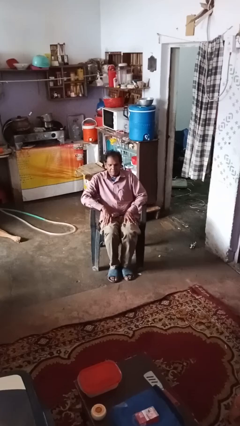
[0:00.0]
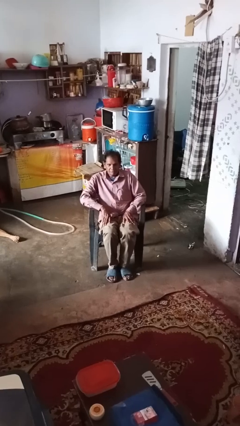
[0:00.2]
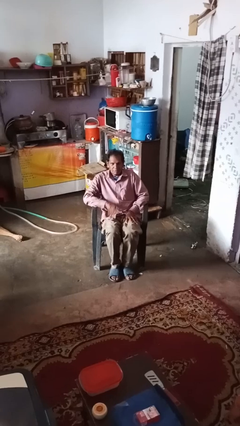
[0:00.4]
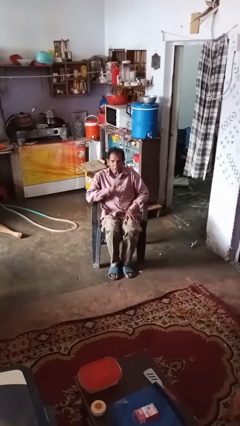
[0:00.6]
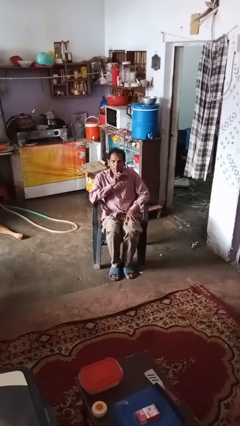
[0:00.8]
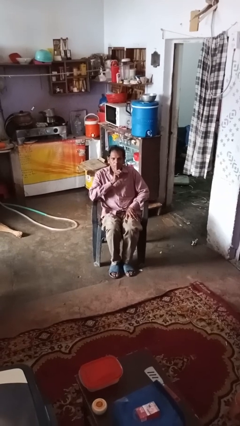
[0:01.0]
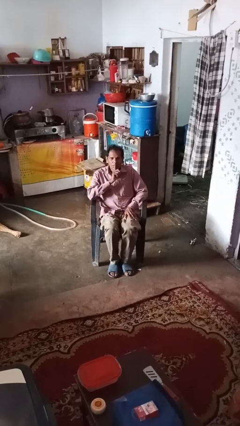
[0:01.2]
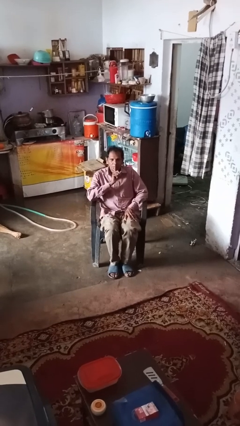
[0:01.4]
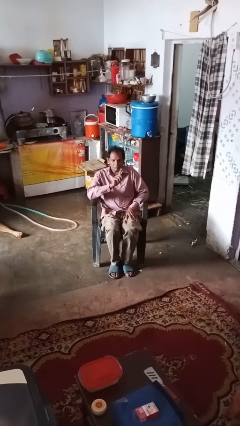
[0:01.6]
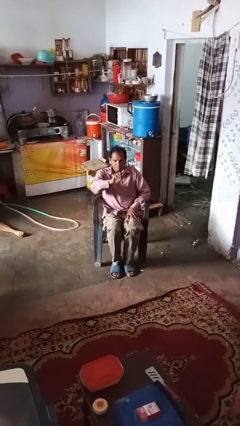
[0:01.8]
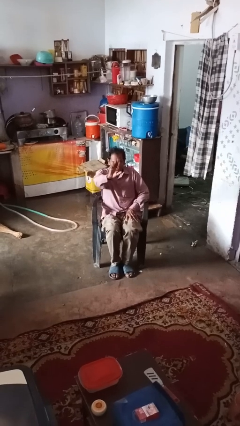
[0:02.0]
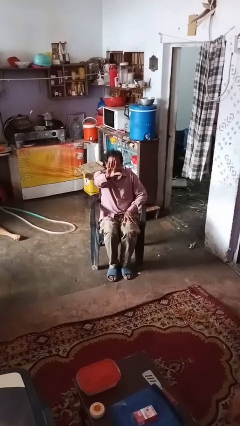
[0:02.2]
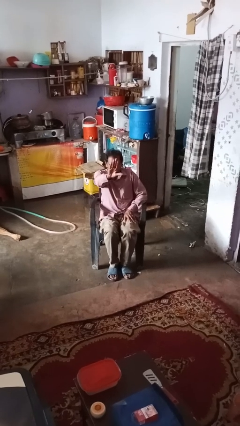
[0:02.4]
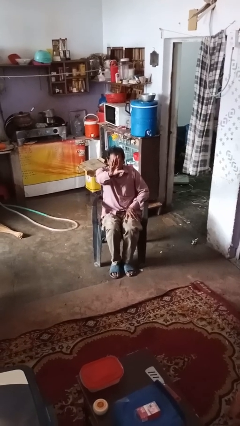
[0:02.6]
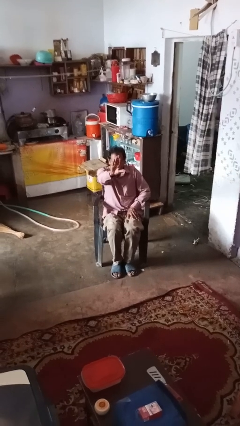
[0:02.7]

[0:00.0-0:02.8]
person gestures be quiet

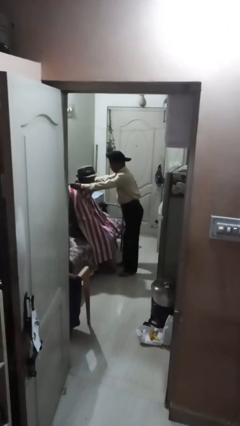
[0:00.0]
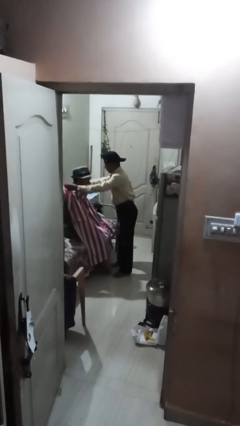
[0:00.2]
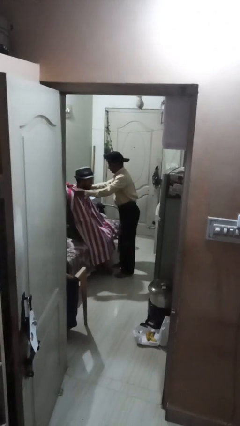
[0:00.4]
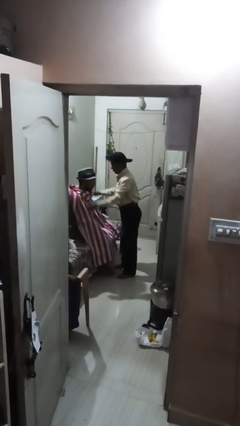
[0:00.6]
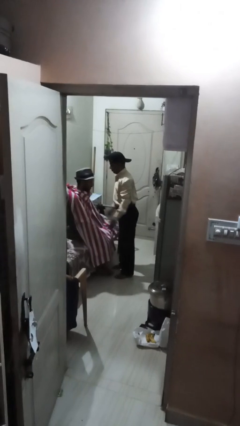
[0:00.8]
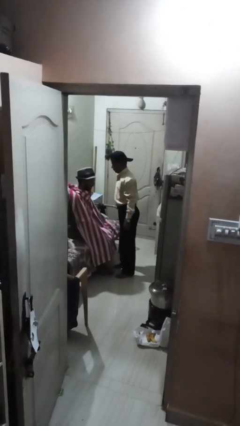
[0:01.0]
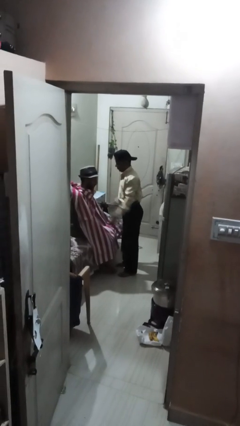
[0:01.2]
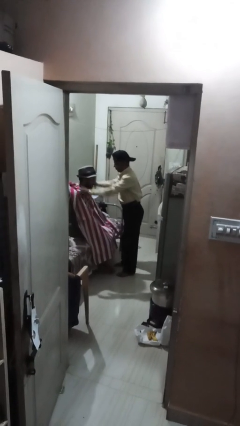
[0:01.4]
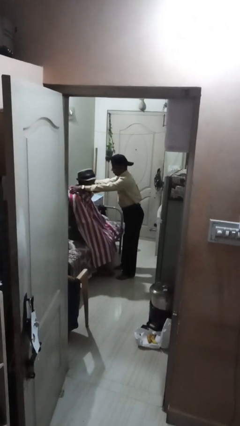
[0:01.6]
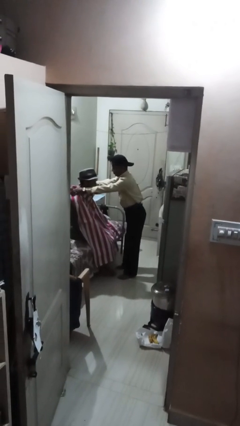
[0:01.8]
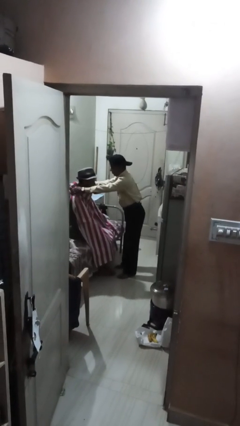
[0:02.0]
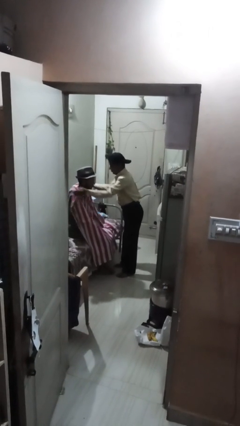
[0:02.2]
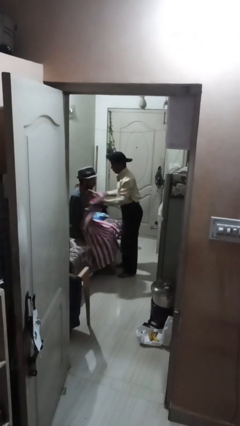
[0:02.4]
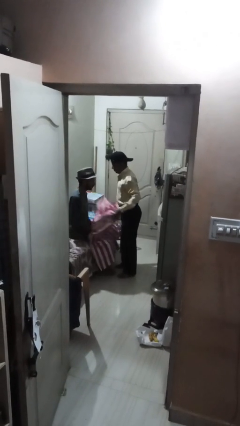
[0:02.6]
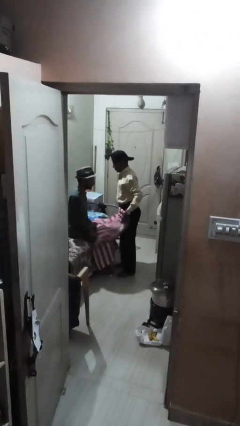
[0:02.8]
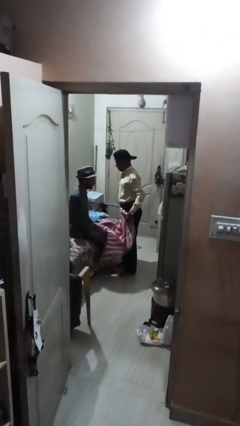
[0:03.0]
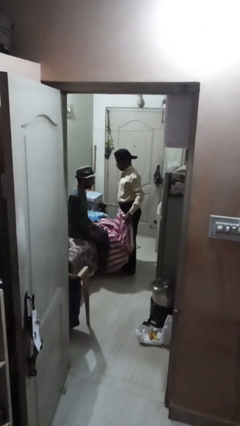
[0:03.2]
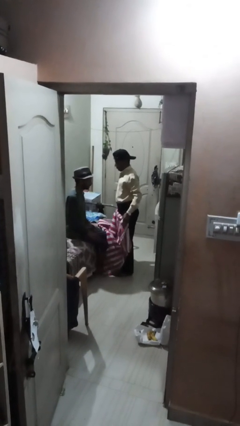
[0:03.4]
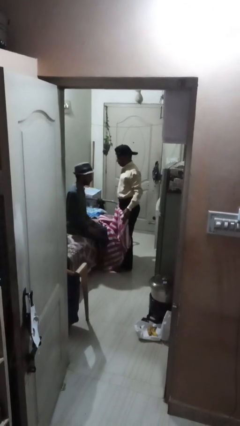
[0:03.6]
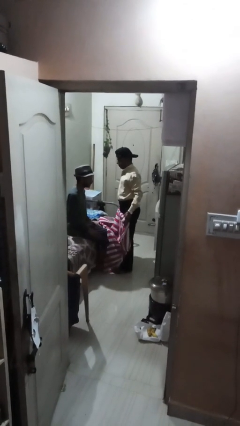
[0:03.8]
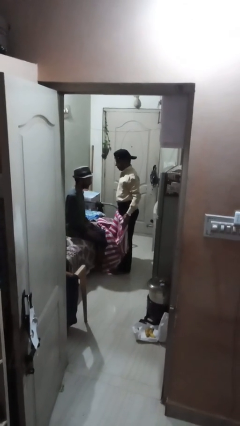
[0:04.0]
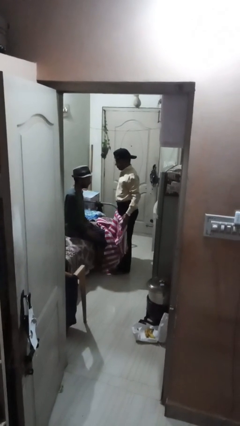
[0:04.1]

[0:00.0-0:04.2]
person uncovers friend with blanket

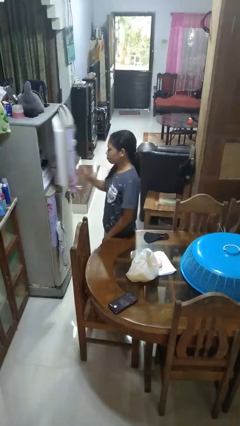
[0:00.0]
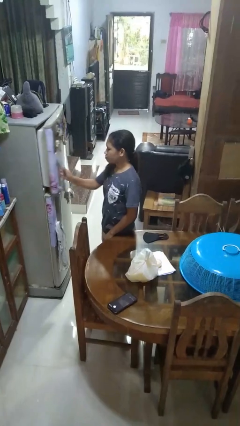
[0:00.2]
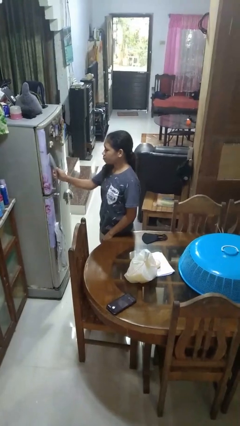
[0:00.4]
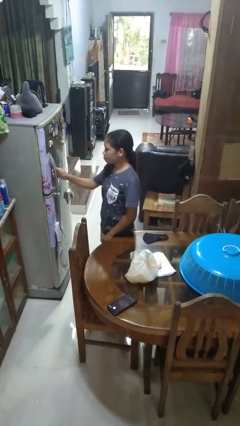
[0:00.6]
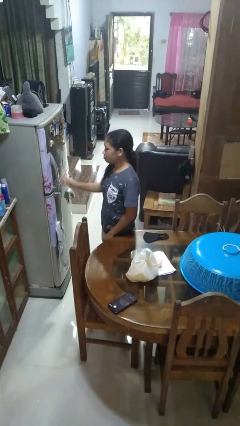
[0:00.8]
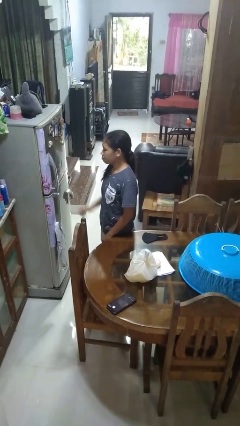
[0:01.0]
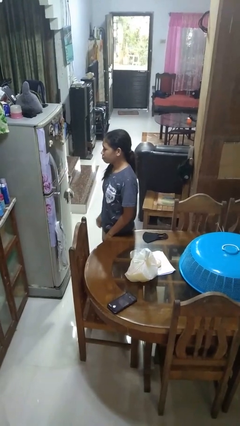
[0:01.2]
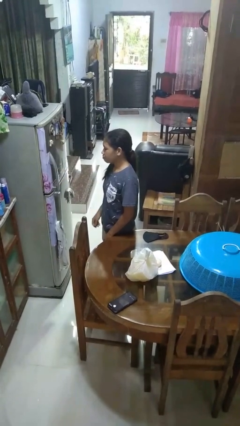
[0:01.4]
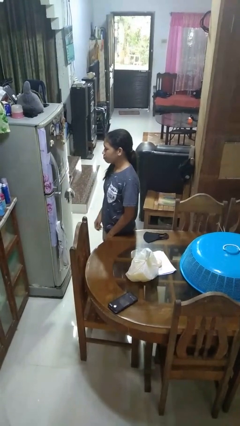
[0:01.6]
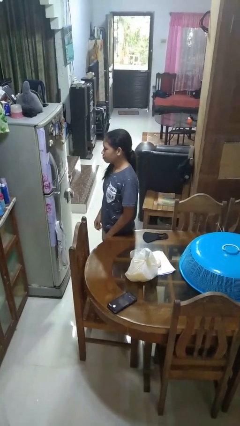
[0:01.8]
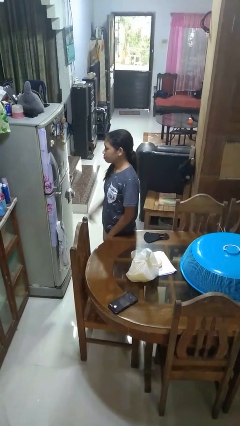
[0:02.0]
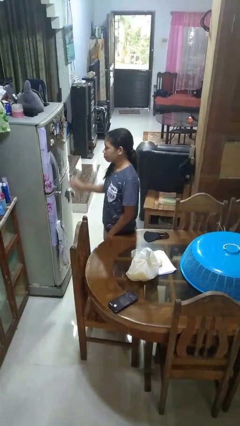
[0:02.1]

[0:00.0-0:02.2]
person closes refrigerator

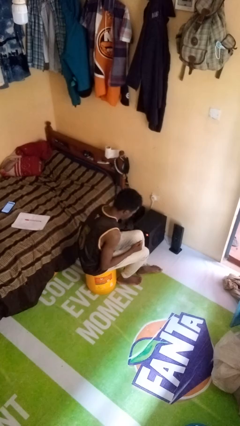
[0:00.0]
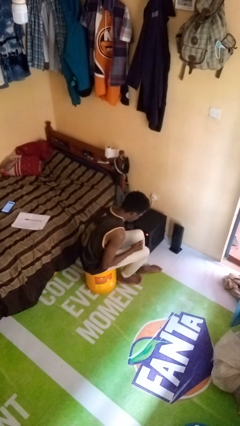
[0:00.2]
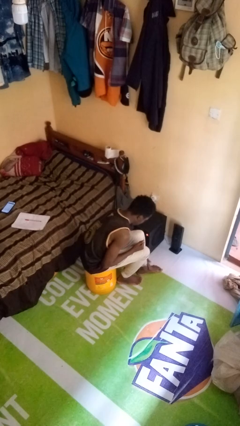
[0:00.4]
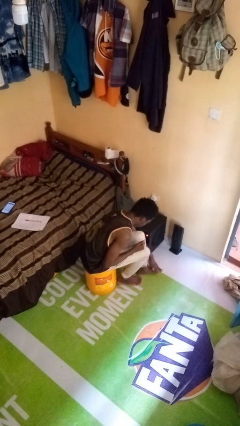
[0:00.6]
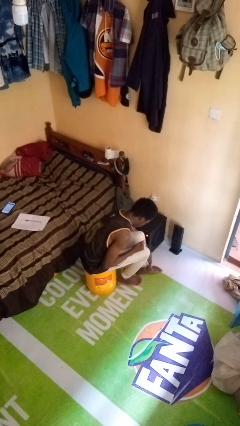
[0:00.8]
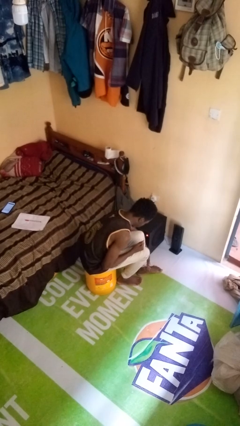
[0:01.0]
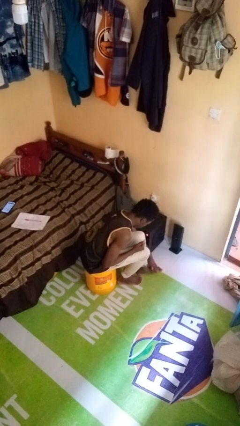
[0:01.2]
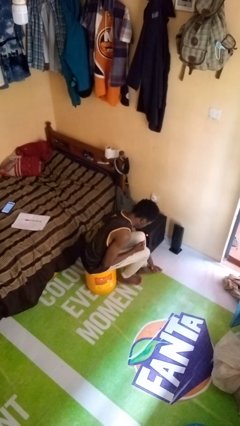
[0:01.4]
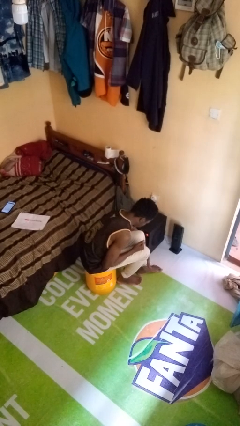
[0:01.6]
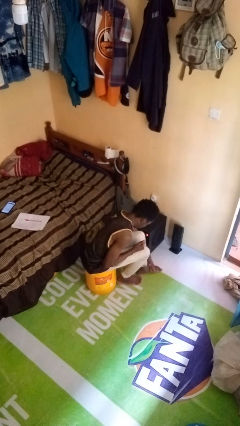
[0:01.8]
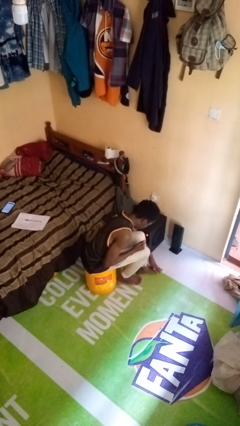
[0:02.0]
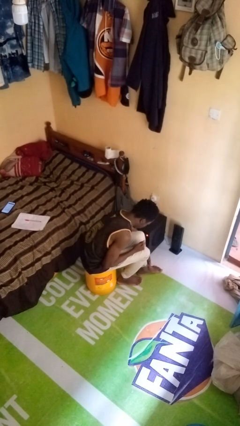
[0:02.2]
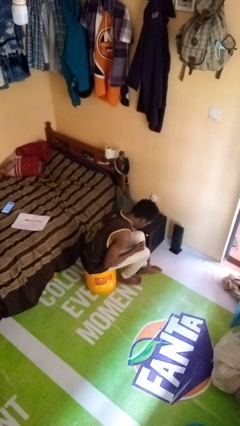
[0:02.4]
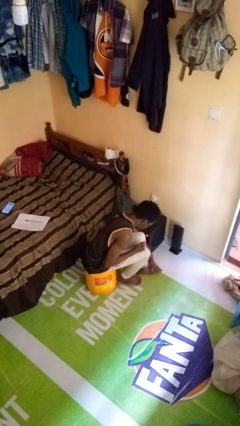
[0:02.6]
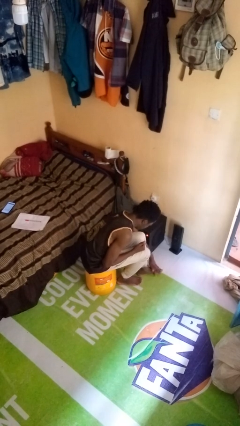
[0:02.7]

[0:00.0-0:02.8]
person rubs foot

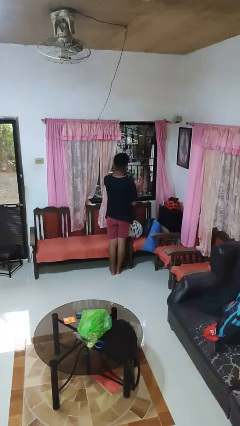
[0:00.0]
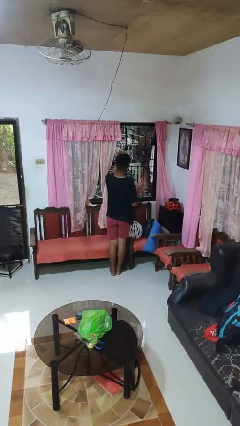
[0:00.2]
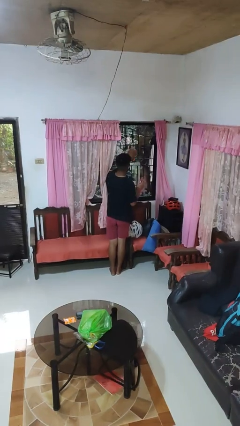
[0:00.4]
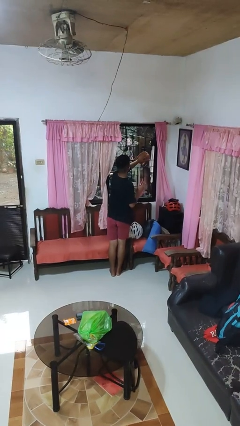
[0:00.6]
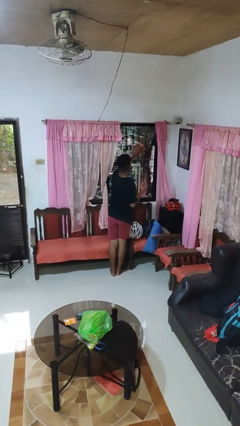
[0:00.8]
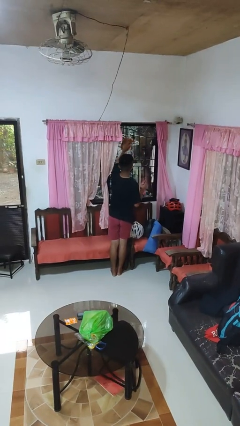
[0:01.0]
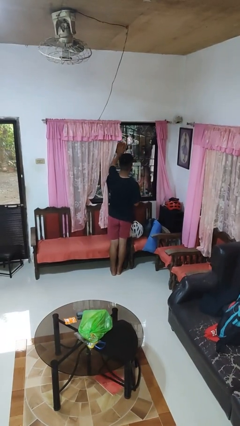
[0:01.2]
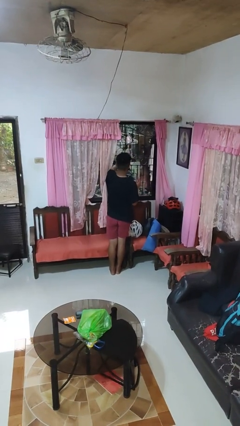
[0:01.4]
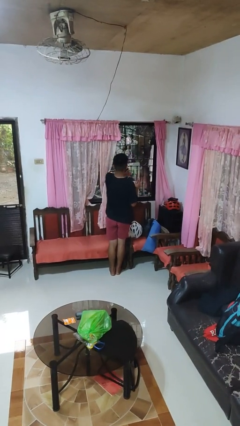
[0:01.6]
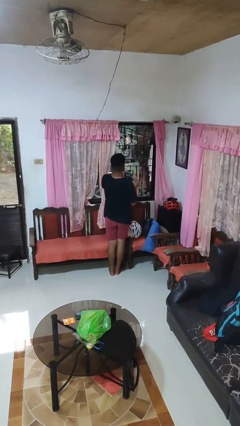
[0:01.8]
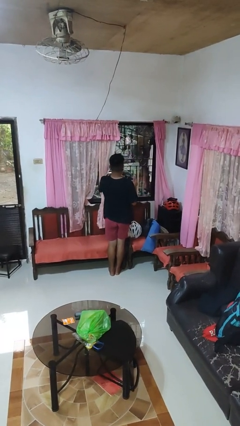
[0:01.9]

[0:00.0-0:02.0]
person washes window

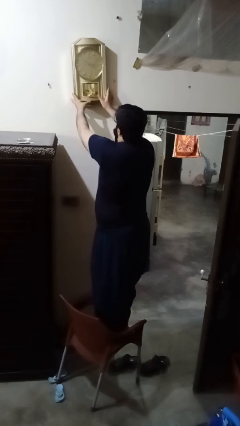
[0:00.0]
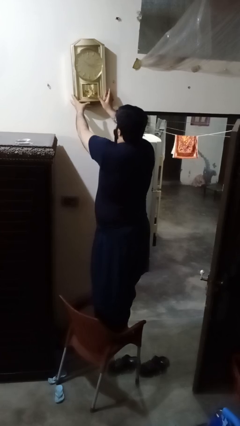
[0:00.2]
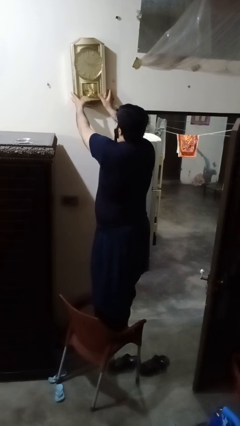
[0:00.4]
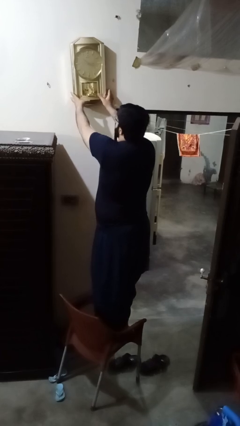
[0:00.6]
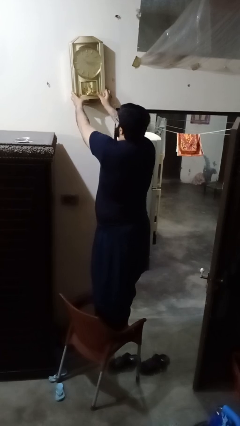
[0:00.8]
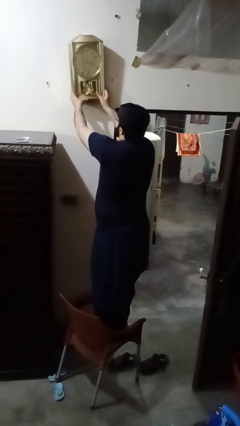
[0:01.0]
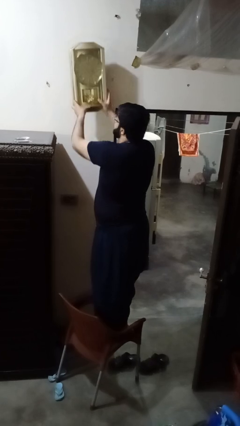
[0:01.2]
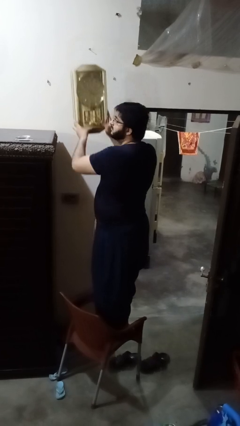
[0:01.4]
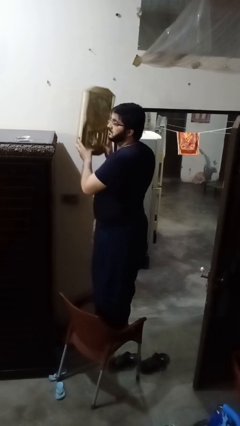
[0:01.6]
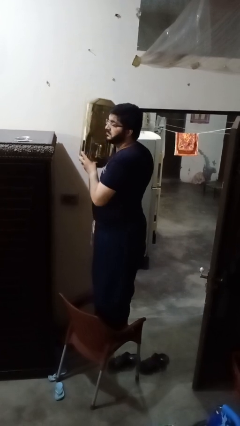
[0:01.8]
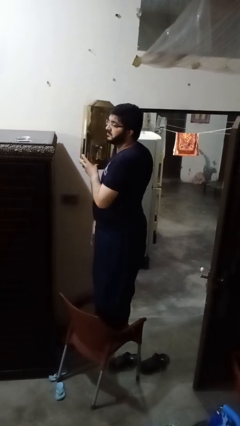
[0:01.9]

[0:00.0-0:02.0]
person takes down smoke detector

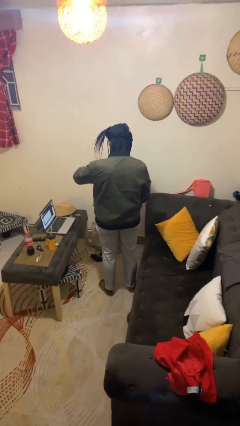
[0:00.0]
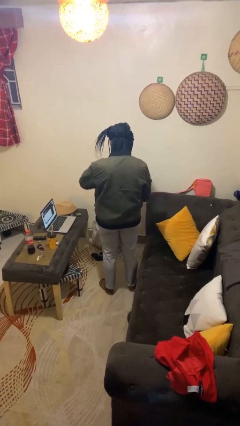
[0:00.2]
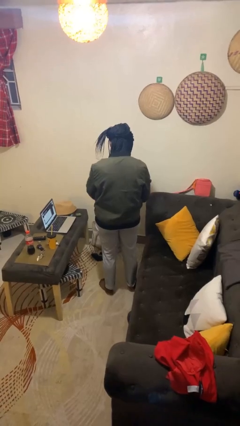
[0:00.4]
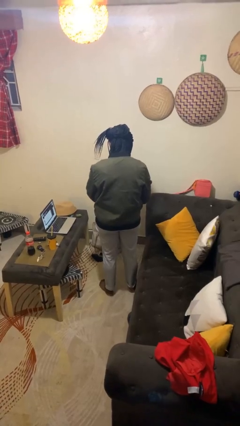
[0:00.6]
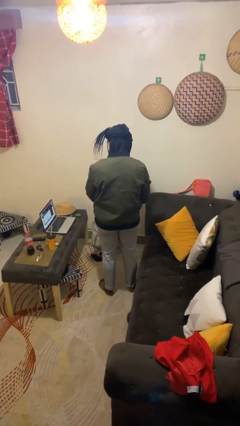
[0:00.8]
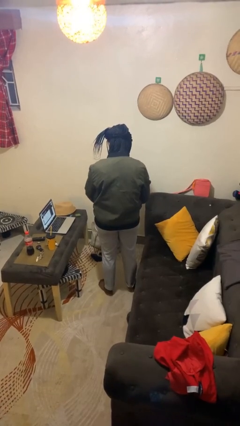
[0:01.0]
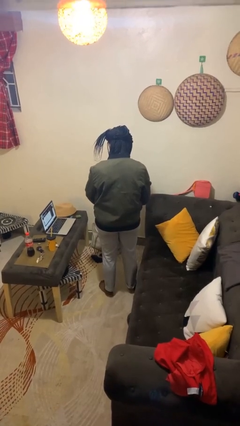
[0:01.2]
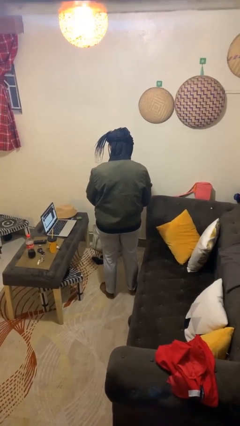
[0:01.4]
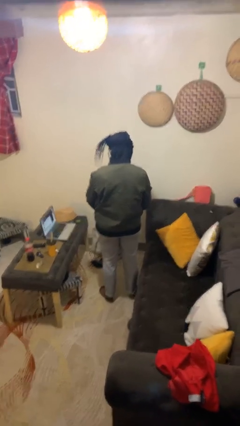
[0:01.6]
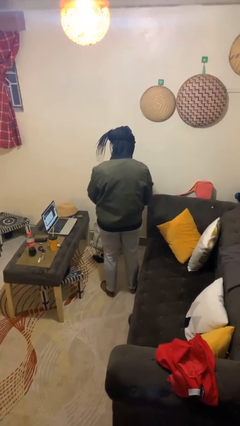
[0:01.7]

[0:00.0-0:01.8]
person unzips jacket
